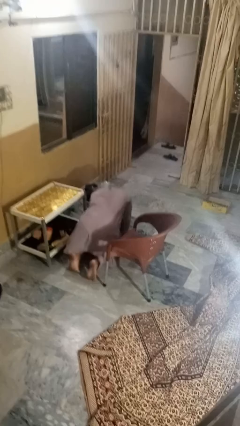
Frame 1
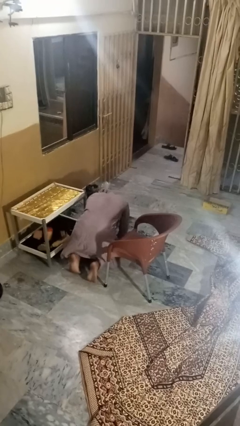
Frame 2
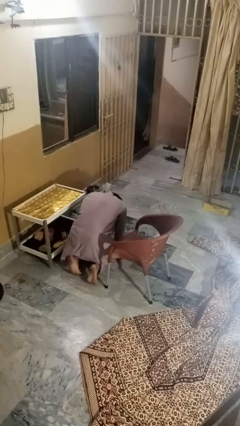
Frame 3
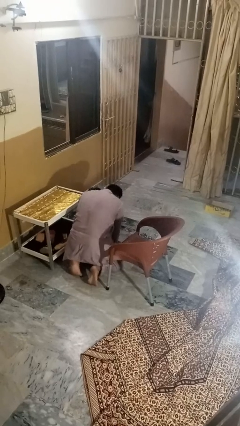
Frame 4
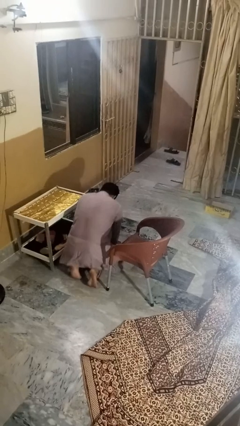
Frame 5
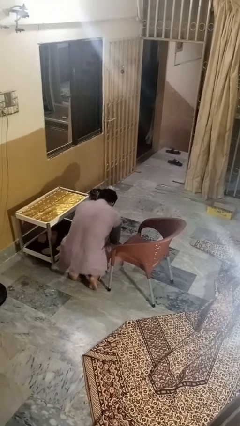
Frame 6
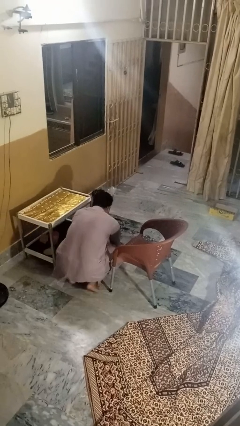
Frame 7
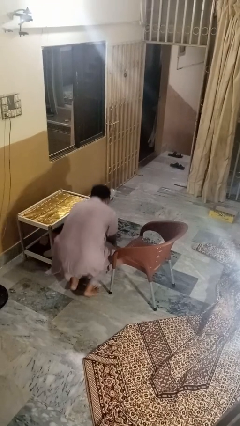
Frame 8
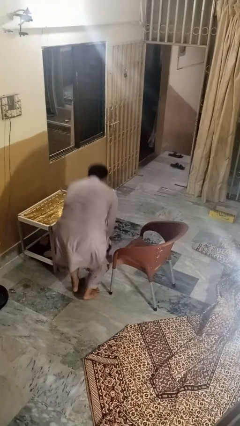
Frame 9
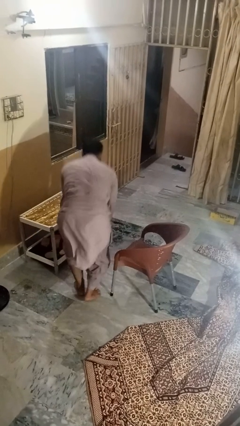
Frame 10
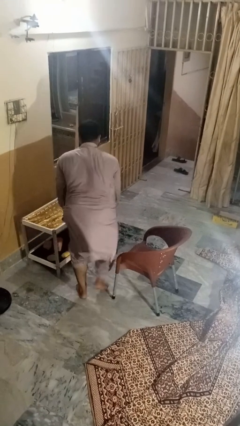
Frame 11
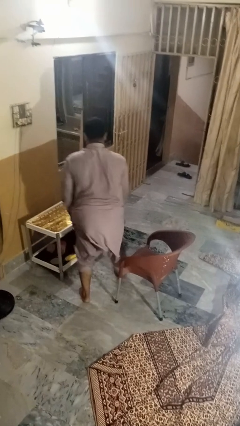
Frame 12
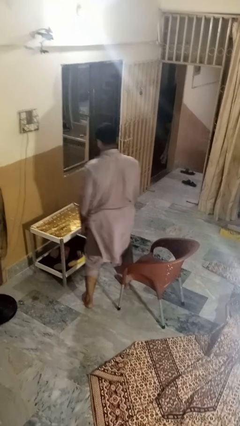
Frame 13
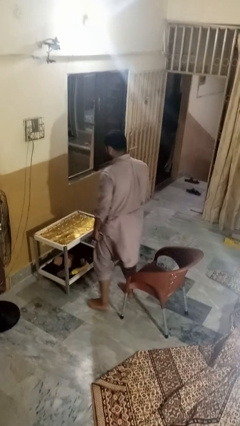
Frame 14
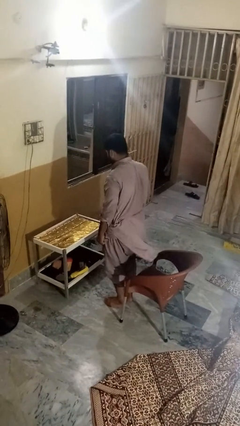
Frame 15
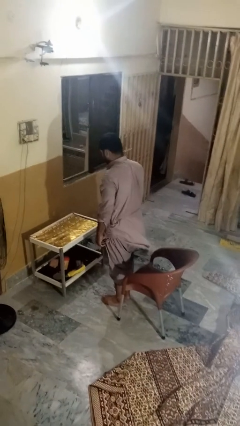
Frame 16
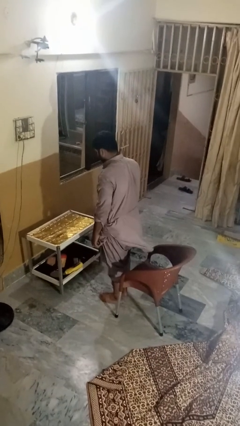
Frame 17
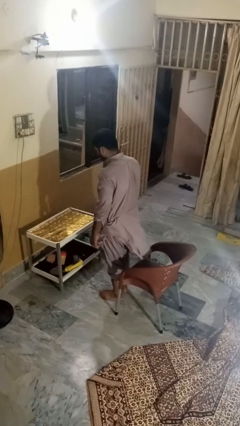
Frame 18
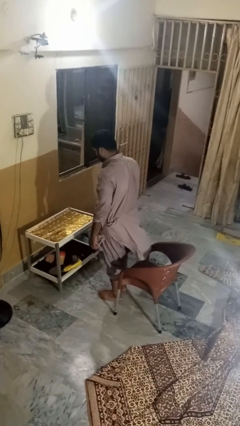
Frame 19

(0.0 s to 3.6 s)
person stands up from floor

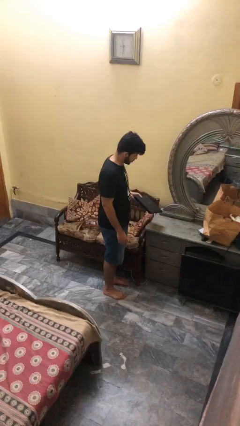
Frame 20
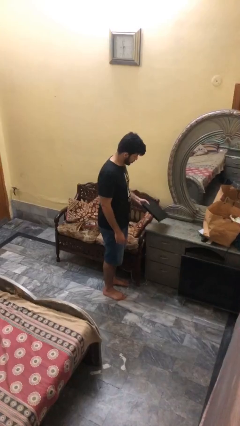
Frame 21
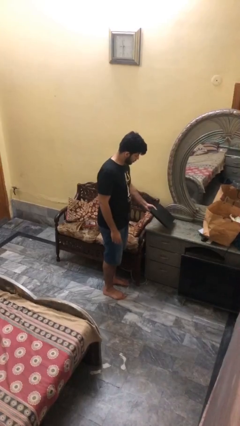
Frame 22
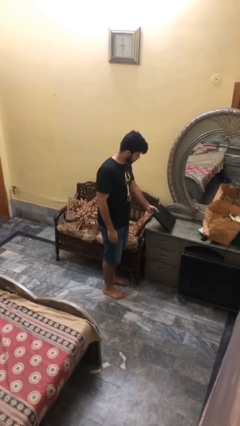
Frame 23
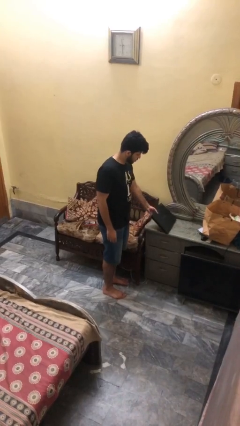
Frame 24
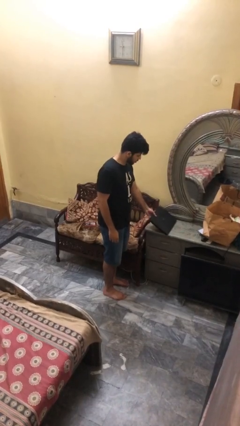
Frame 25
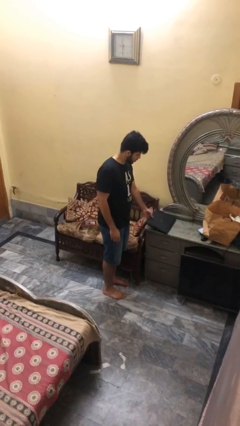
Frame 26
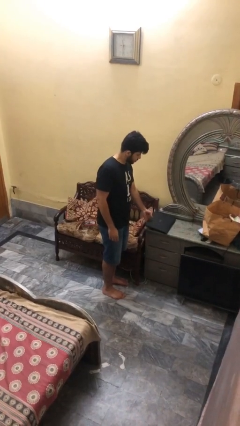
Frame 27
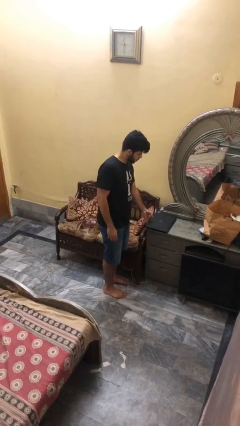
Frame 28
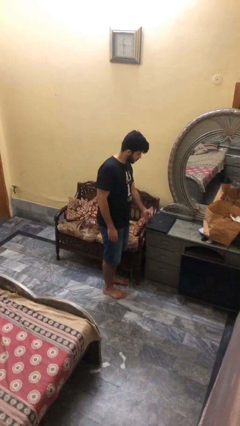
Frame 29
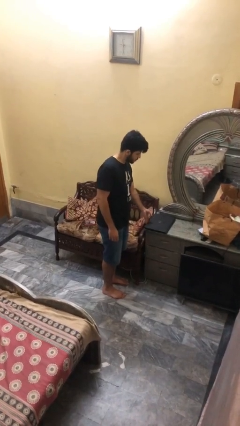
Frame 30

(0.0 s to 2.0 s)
person puts down object on countertop

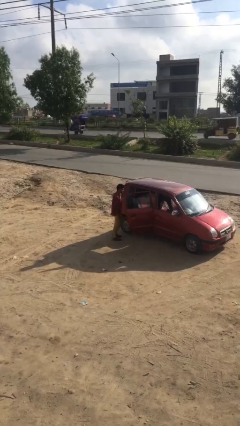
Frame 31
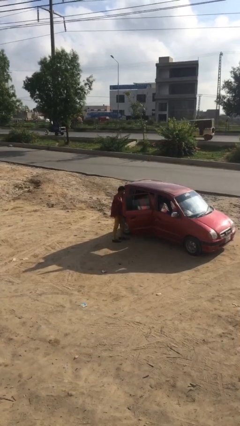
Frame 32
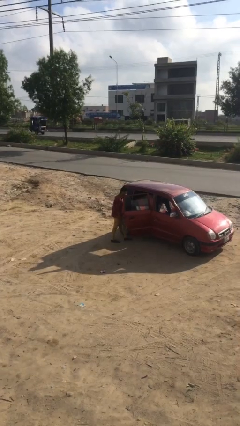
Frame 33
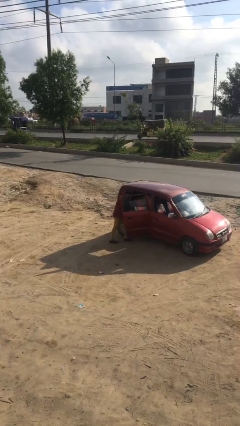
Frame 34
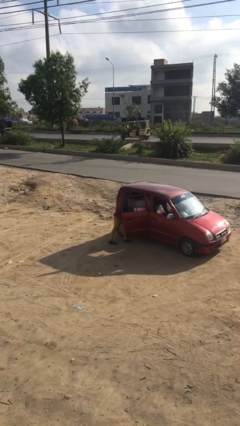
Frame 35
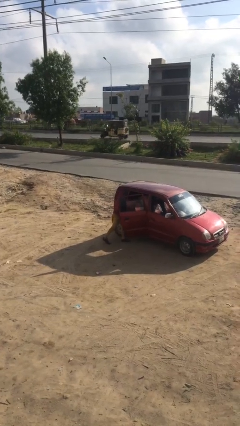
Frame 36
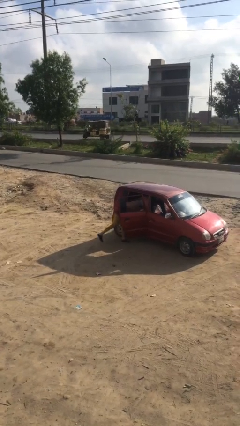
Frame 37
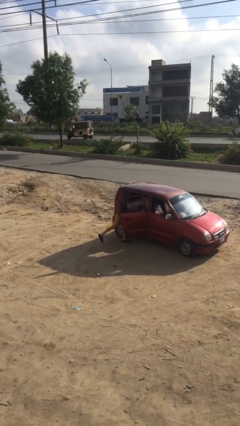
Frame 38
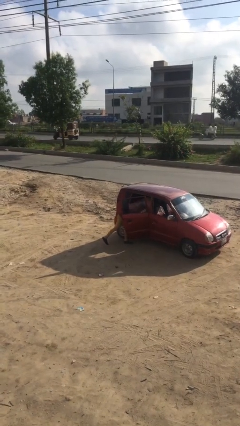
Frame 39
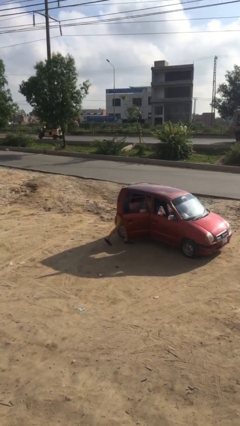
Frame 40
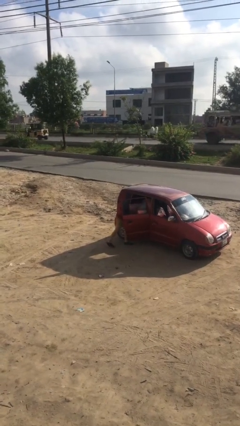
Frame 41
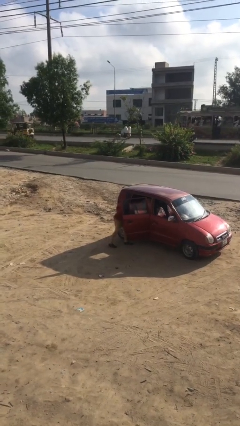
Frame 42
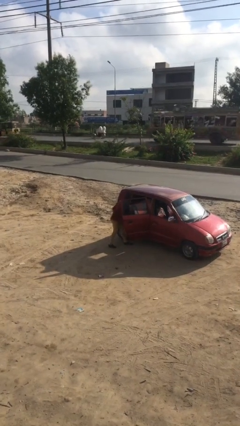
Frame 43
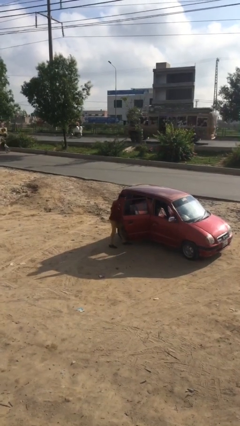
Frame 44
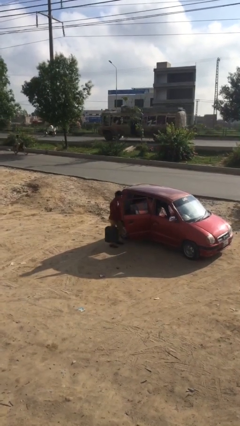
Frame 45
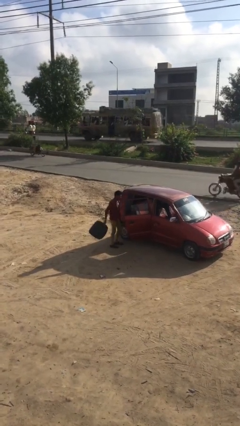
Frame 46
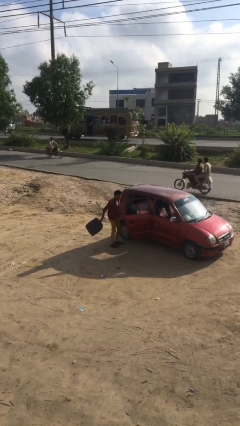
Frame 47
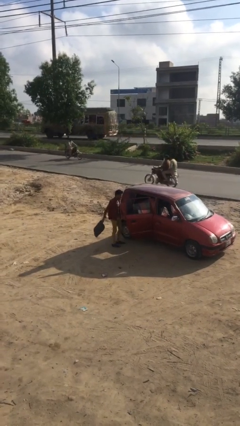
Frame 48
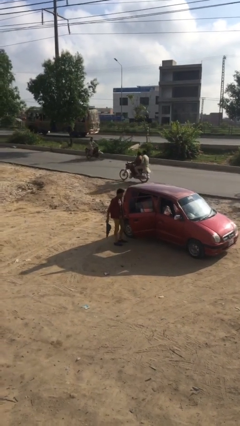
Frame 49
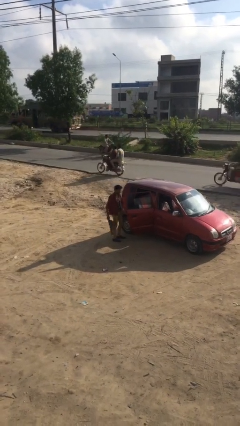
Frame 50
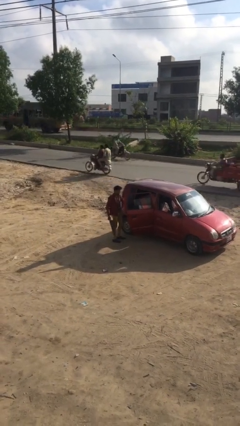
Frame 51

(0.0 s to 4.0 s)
person unloads car

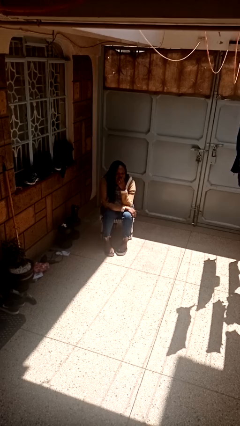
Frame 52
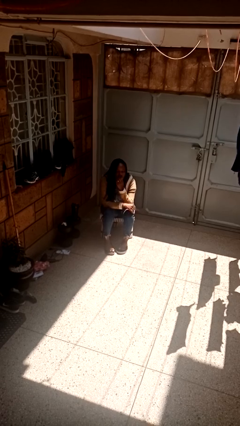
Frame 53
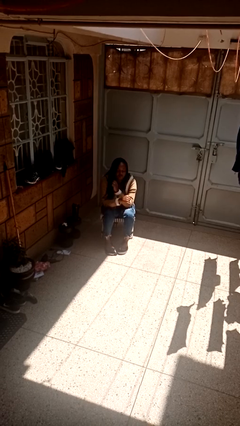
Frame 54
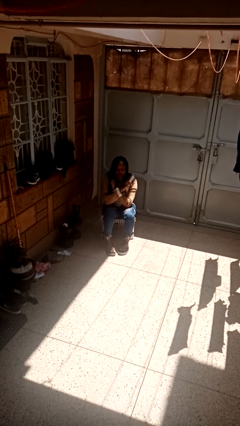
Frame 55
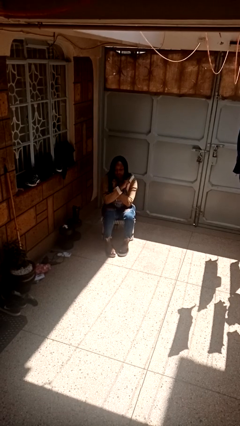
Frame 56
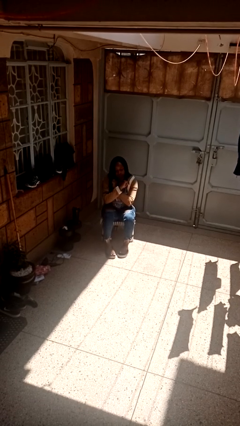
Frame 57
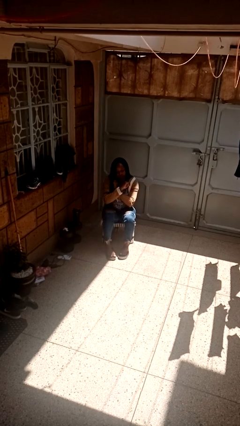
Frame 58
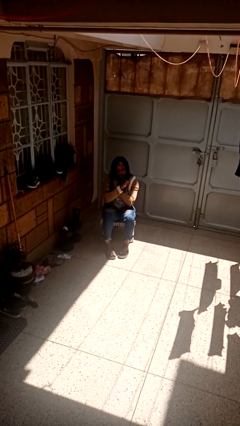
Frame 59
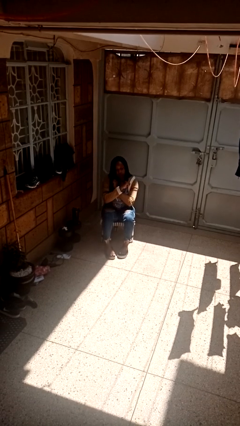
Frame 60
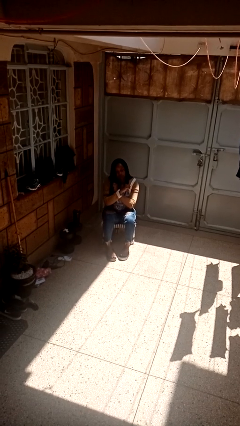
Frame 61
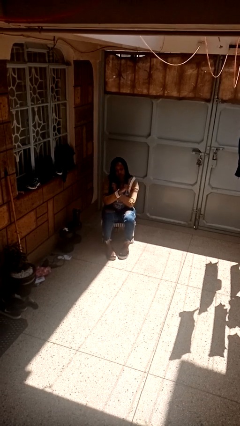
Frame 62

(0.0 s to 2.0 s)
person gestures arms x

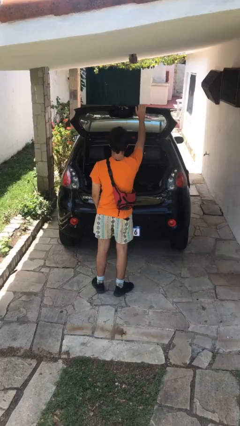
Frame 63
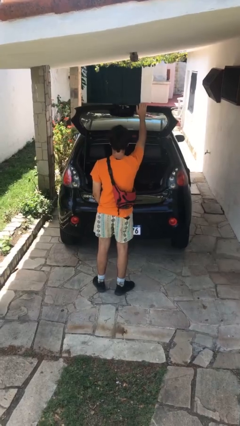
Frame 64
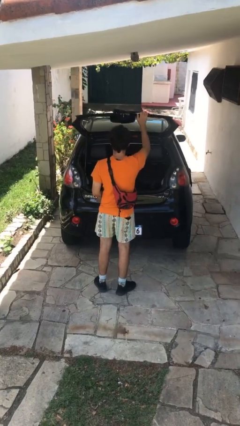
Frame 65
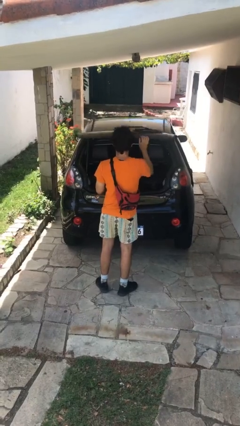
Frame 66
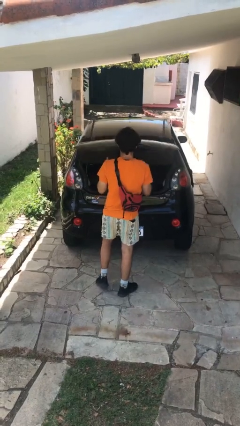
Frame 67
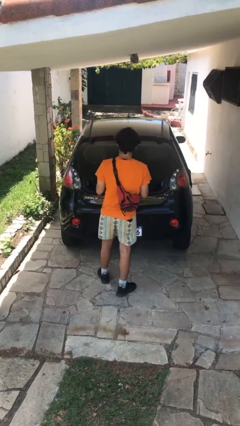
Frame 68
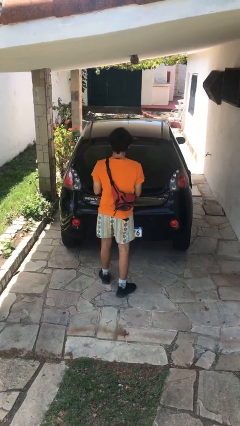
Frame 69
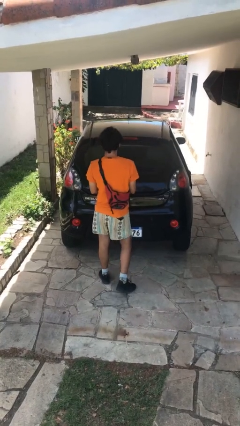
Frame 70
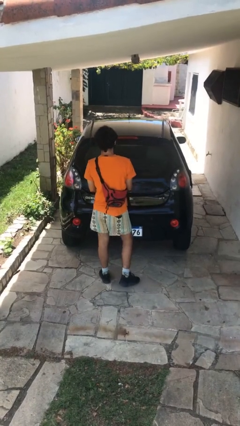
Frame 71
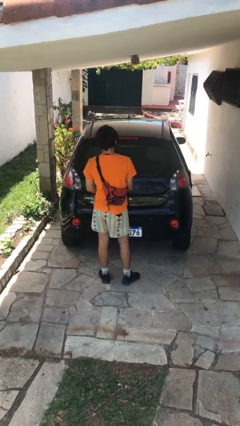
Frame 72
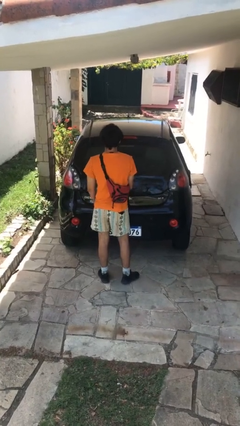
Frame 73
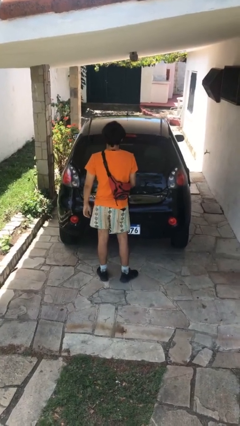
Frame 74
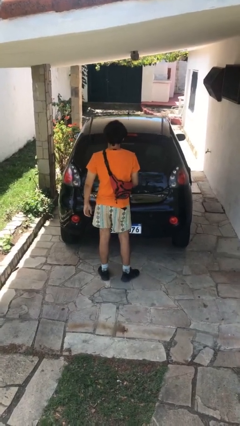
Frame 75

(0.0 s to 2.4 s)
person closes car trunk

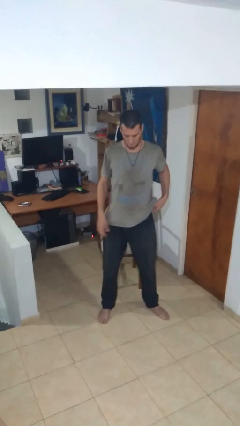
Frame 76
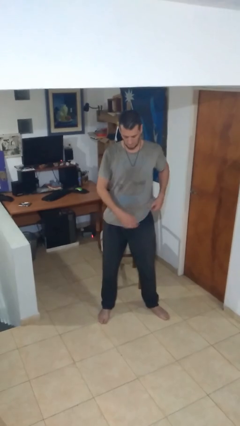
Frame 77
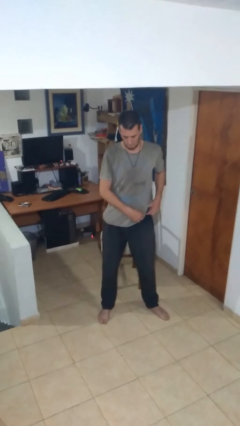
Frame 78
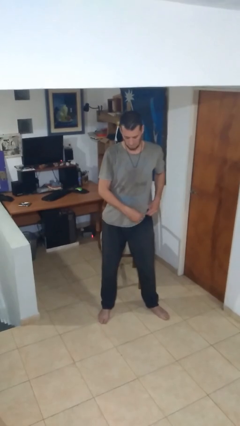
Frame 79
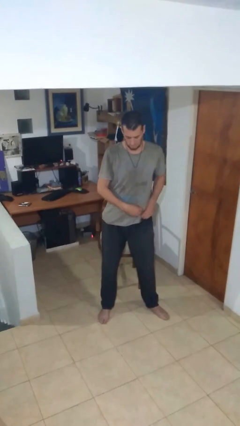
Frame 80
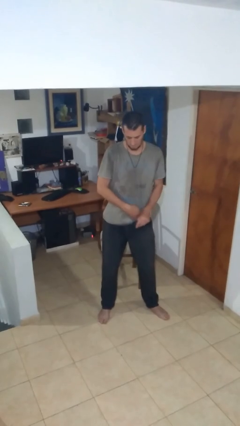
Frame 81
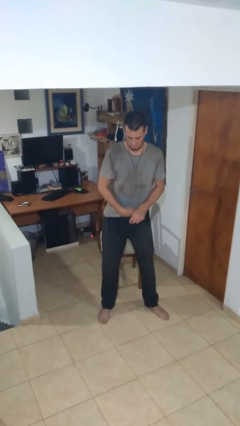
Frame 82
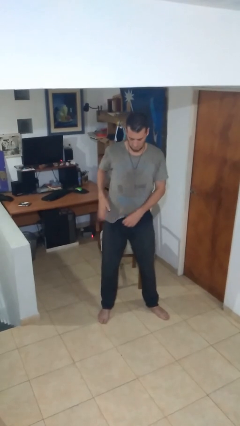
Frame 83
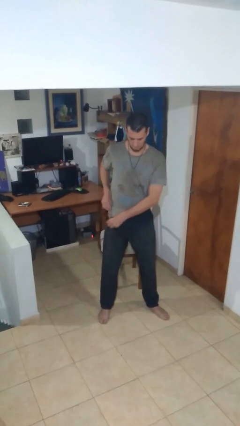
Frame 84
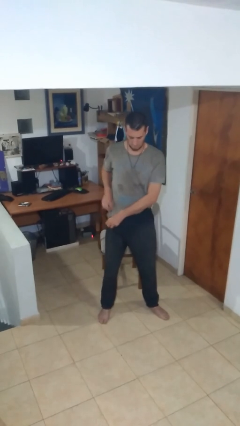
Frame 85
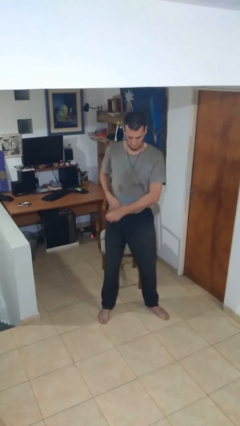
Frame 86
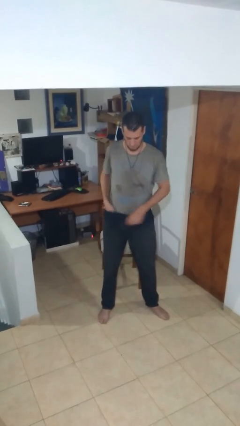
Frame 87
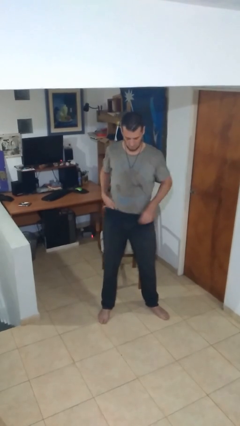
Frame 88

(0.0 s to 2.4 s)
person tucks in shirt

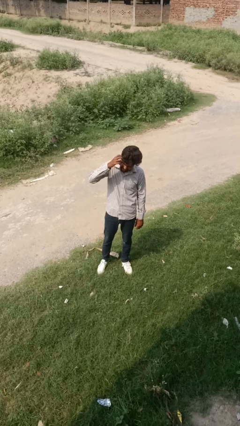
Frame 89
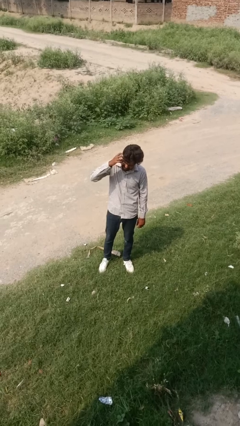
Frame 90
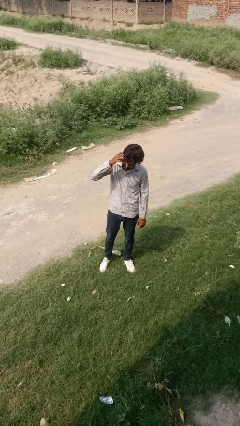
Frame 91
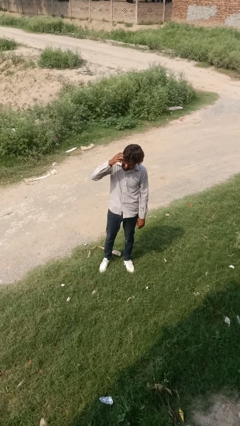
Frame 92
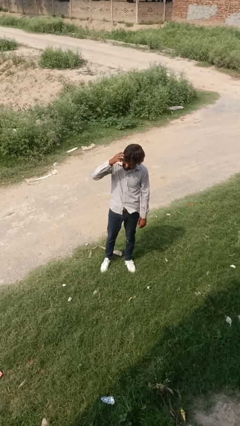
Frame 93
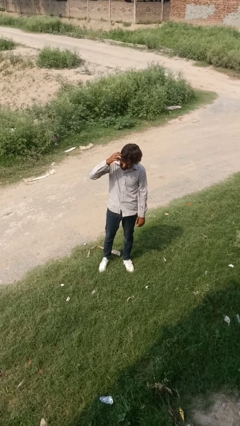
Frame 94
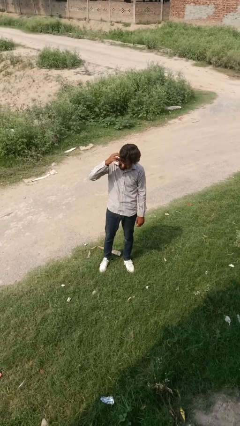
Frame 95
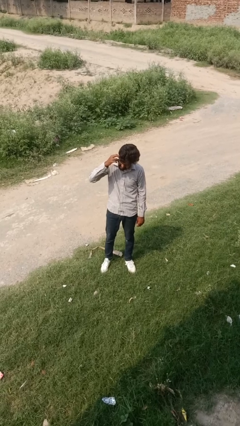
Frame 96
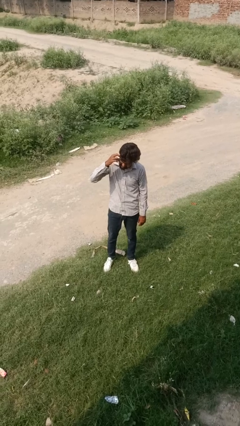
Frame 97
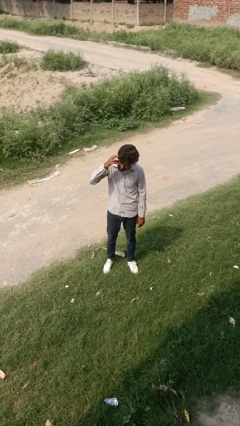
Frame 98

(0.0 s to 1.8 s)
person scratches face
